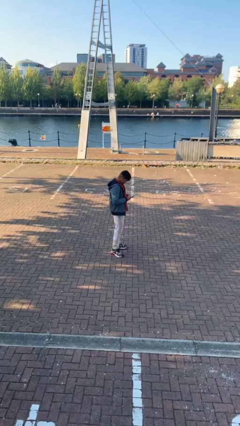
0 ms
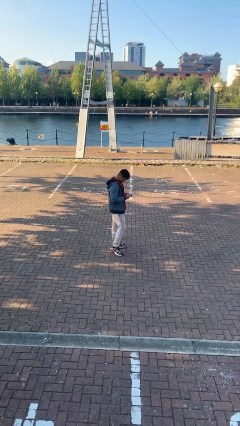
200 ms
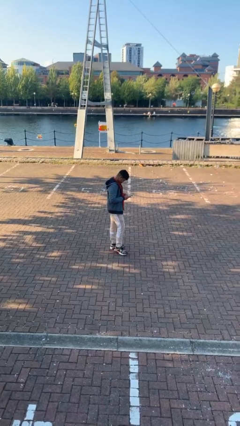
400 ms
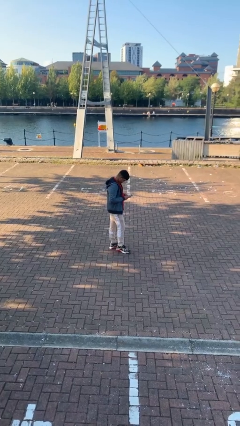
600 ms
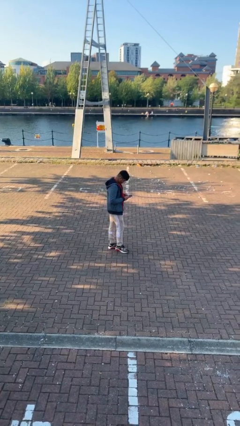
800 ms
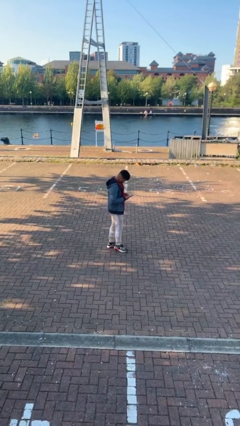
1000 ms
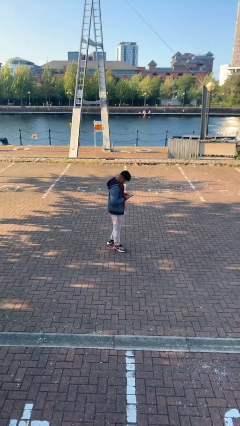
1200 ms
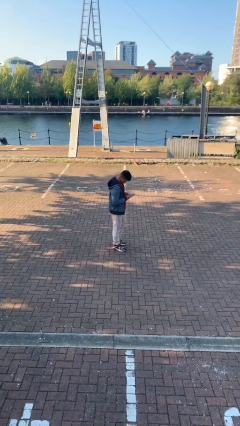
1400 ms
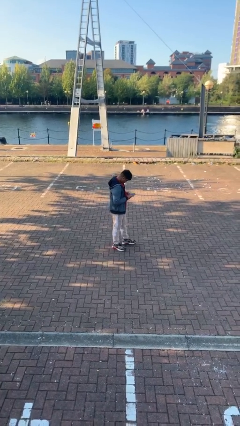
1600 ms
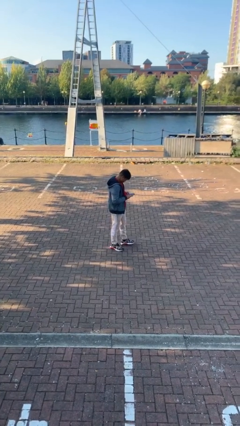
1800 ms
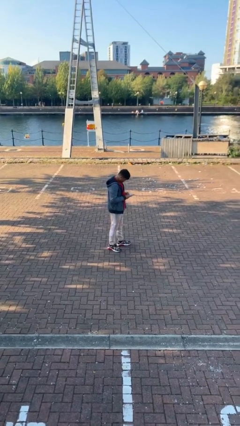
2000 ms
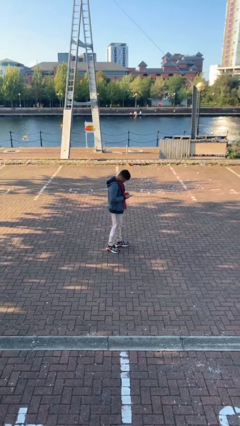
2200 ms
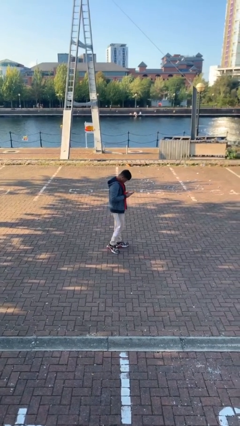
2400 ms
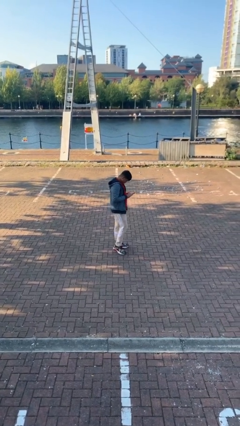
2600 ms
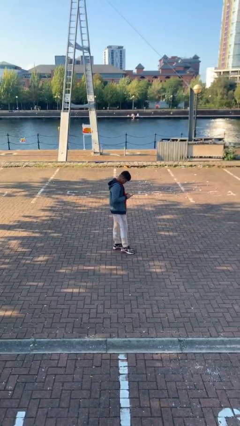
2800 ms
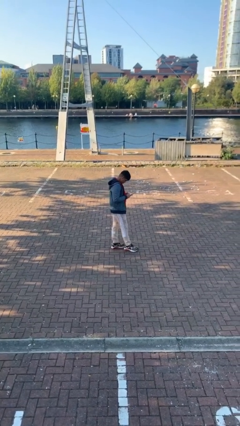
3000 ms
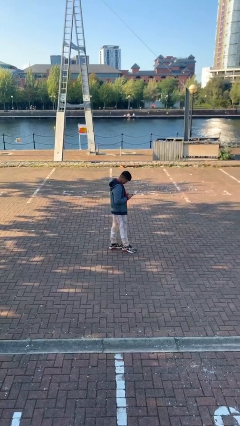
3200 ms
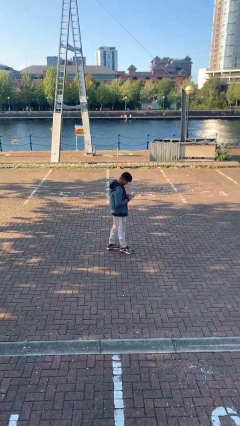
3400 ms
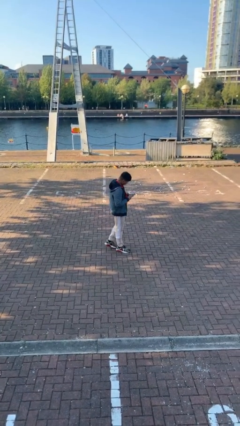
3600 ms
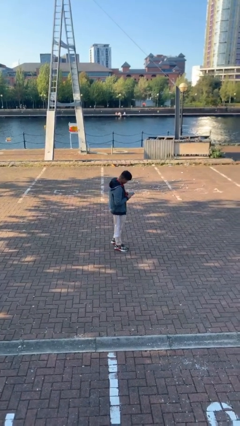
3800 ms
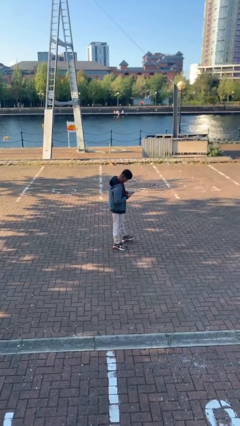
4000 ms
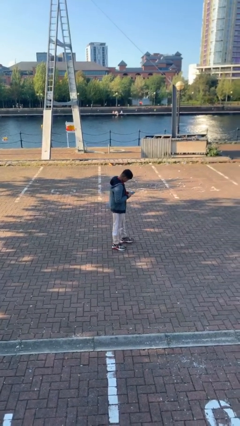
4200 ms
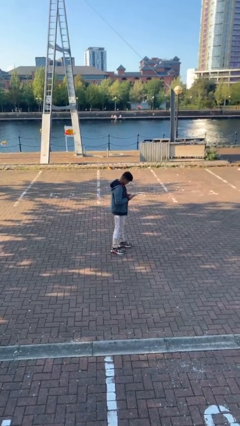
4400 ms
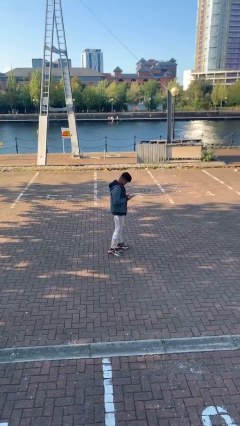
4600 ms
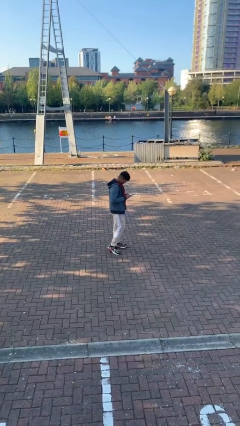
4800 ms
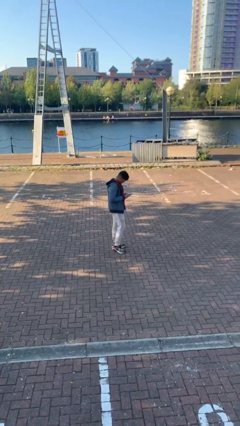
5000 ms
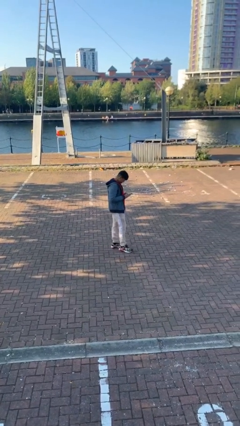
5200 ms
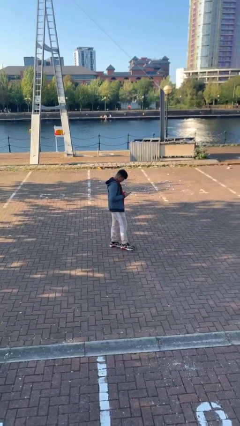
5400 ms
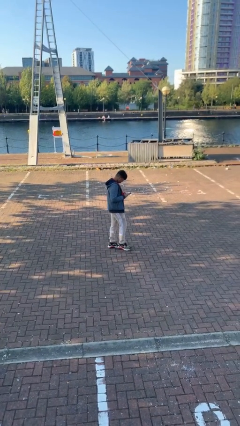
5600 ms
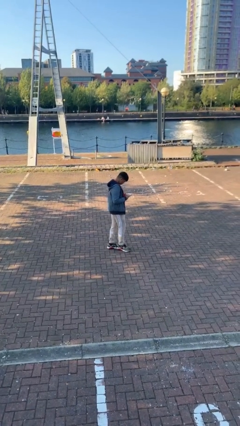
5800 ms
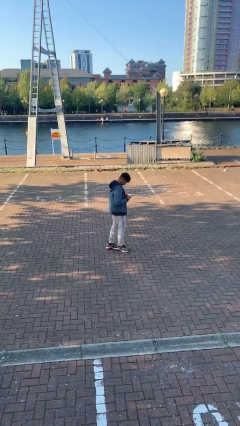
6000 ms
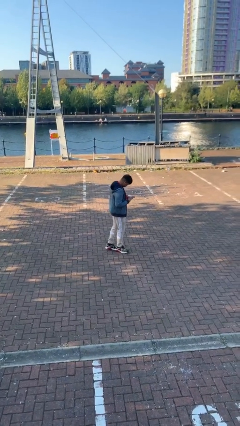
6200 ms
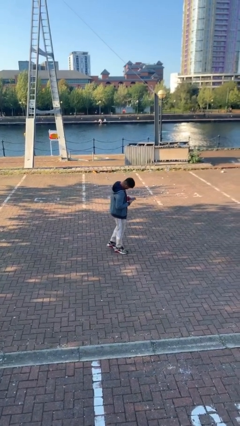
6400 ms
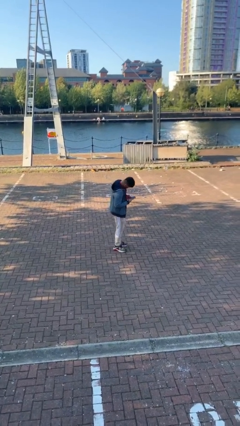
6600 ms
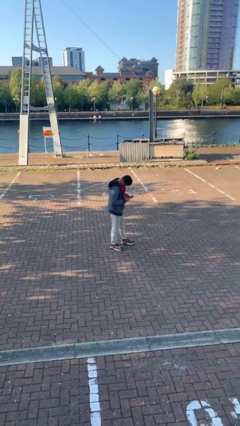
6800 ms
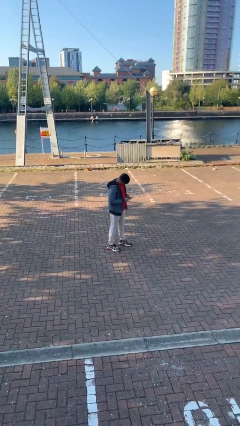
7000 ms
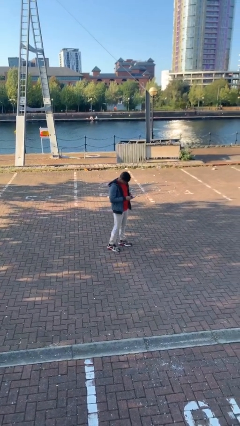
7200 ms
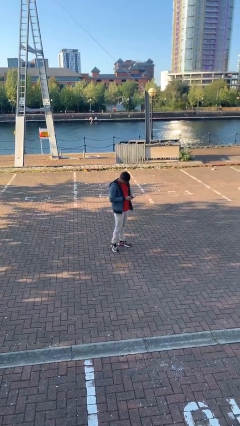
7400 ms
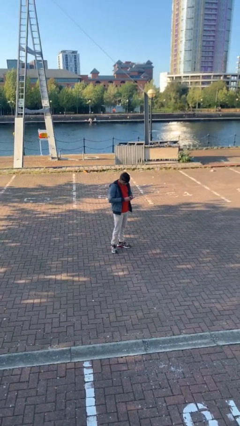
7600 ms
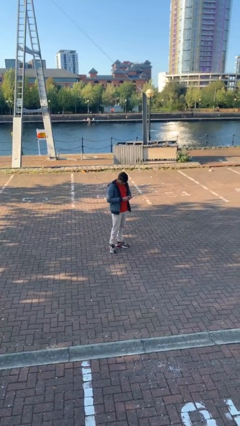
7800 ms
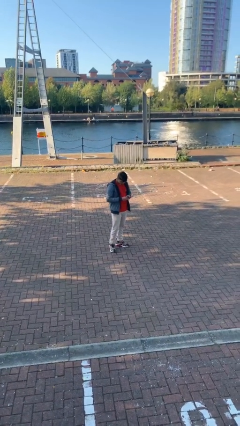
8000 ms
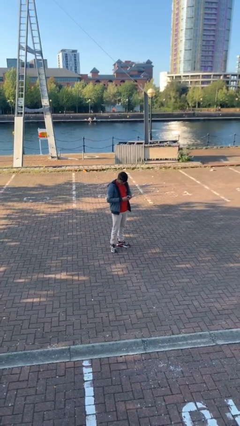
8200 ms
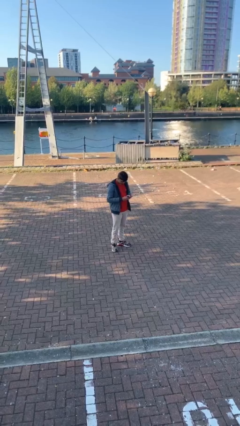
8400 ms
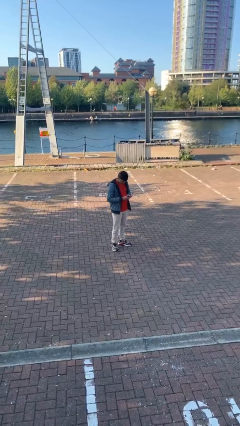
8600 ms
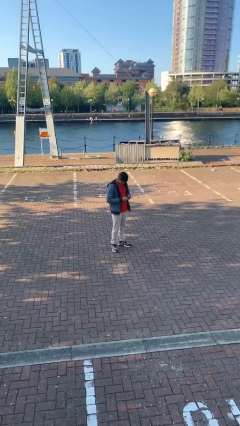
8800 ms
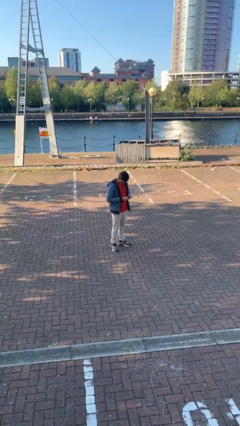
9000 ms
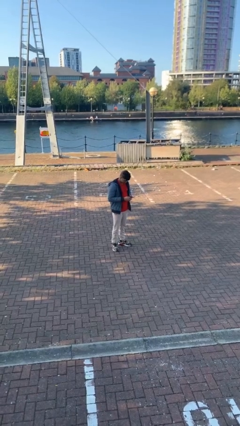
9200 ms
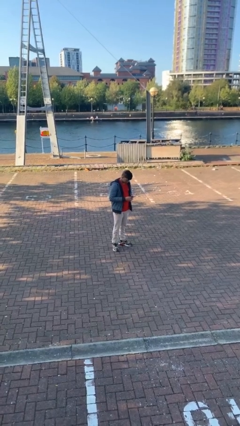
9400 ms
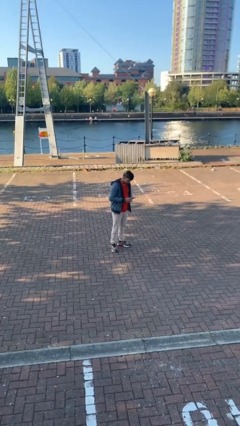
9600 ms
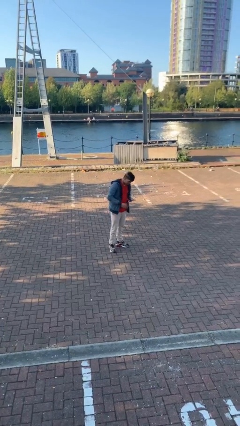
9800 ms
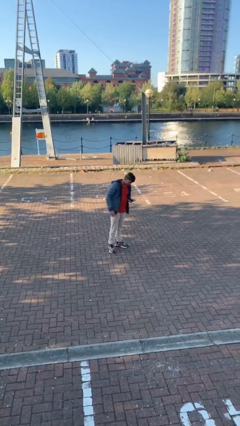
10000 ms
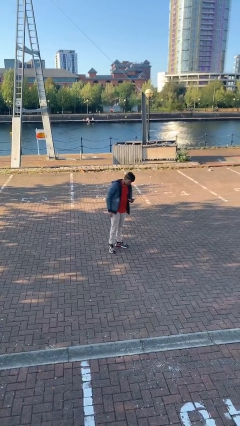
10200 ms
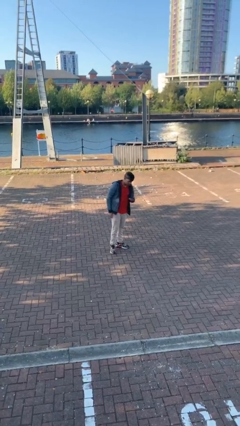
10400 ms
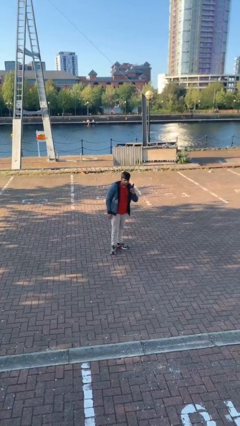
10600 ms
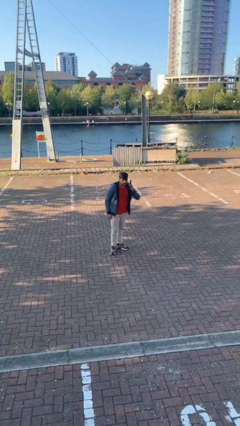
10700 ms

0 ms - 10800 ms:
person texts on phone

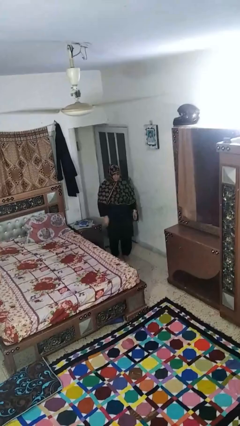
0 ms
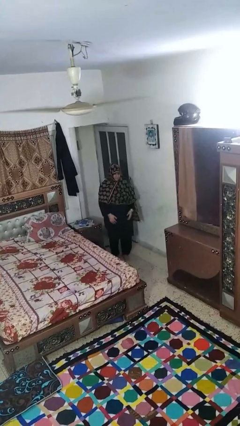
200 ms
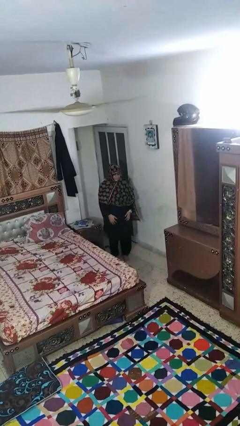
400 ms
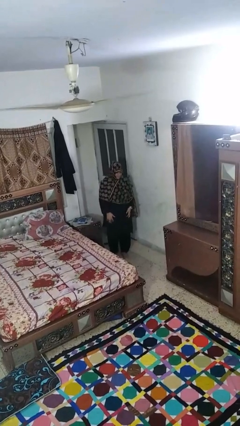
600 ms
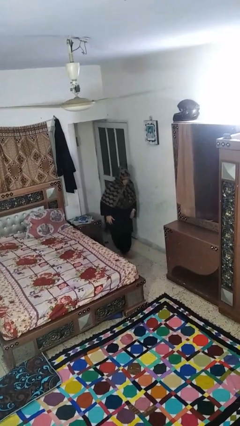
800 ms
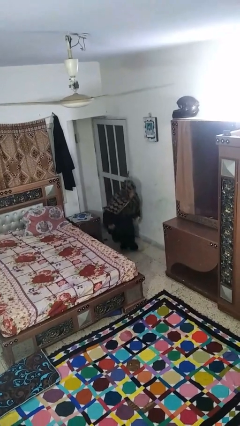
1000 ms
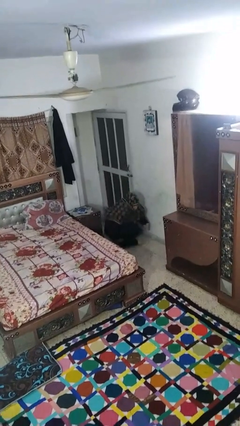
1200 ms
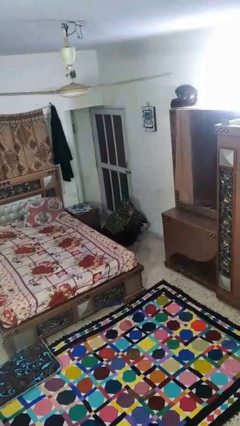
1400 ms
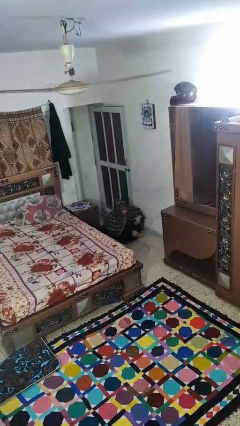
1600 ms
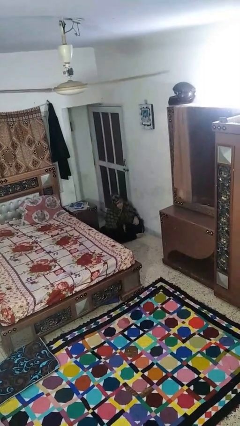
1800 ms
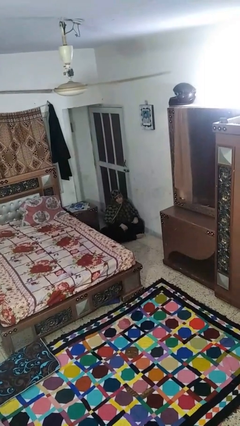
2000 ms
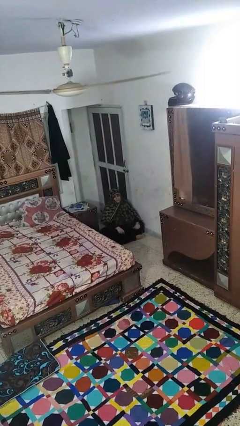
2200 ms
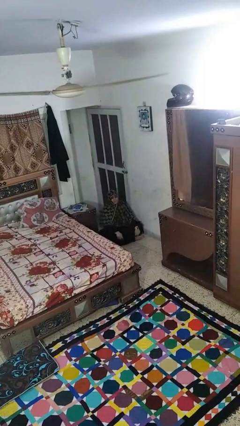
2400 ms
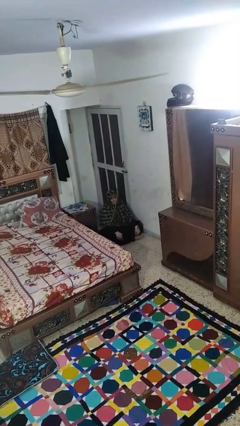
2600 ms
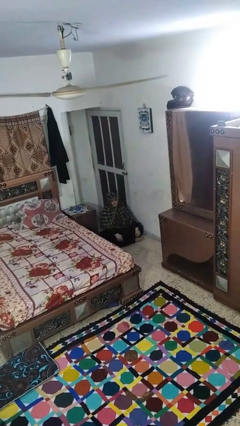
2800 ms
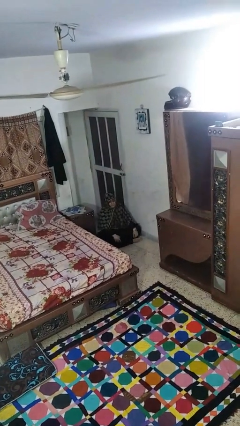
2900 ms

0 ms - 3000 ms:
person sits crisscross

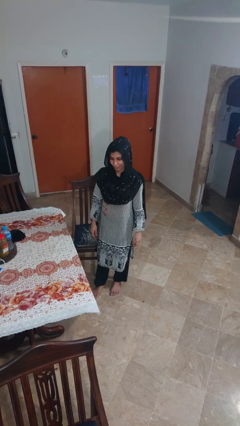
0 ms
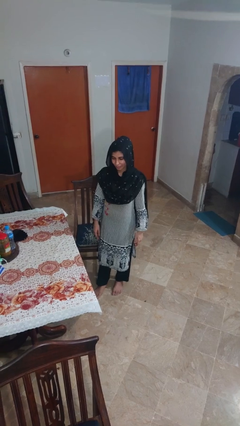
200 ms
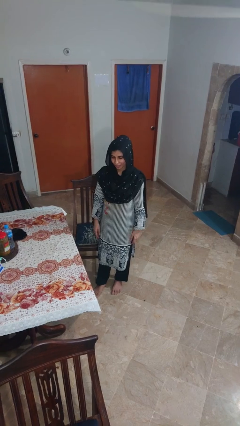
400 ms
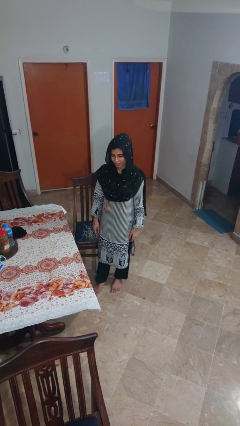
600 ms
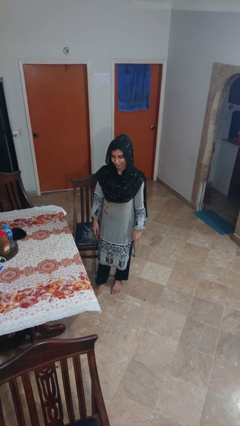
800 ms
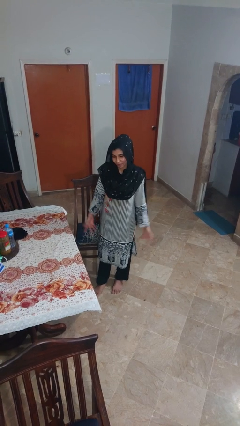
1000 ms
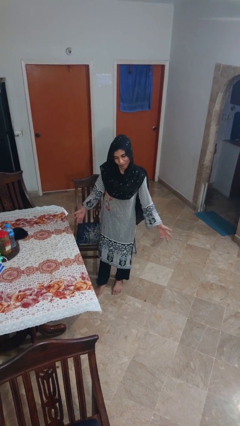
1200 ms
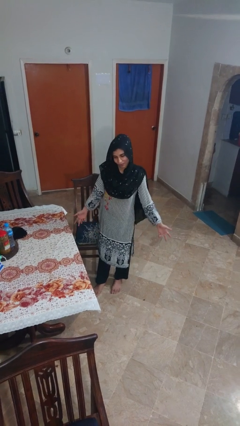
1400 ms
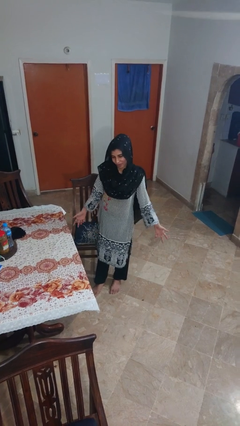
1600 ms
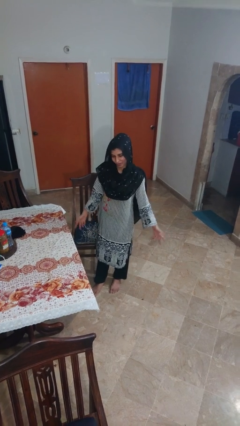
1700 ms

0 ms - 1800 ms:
person shrugs

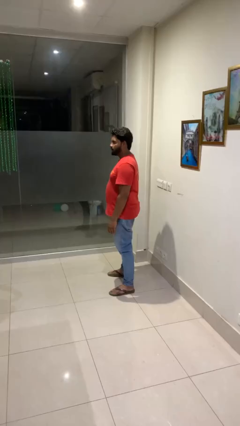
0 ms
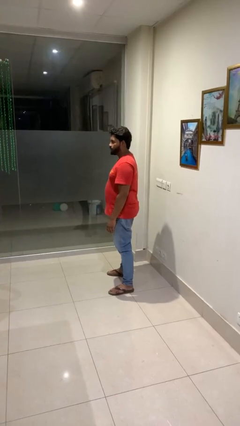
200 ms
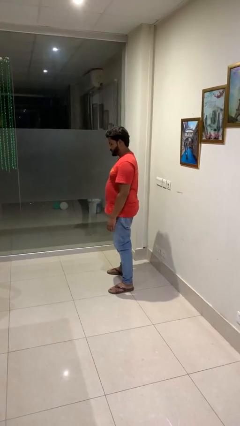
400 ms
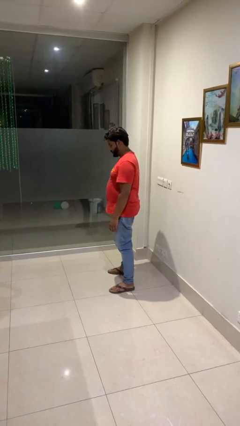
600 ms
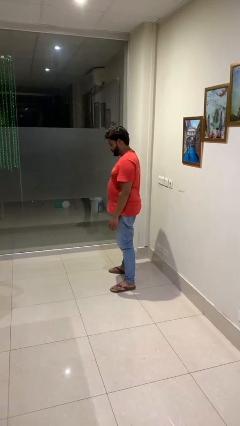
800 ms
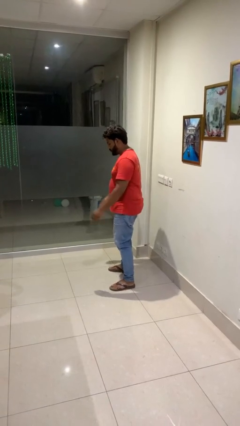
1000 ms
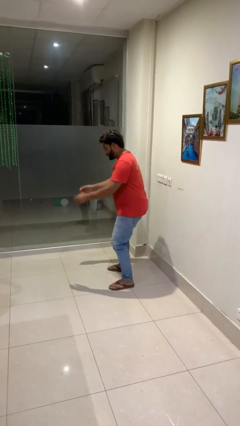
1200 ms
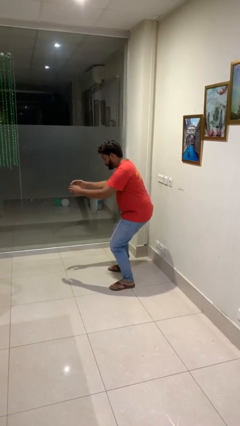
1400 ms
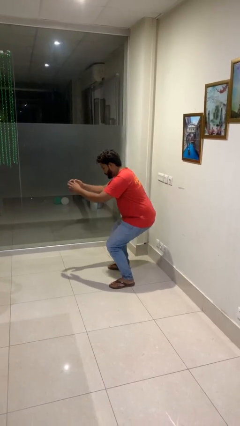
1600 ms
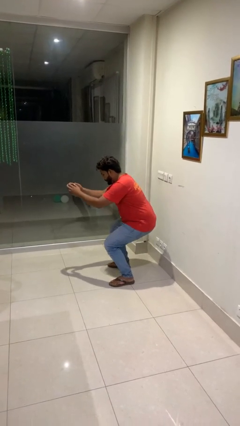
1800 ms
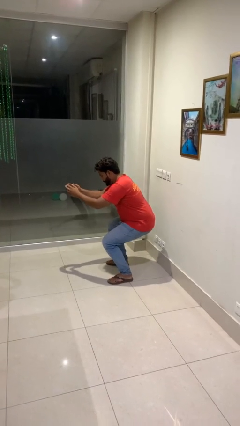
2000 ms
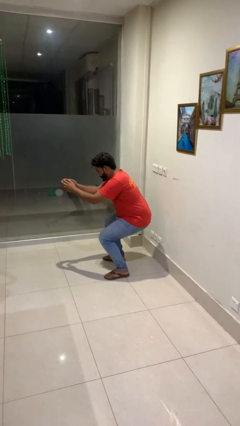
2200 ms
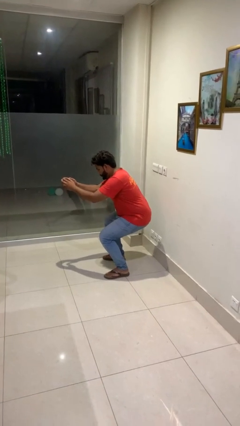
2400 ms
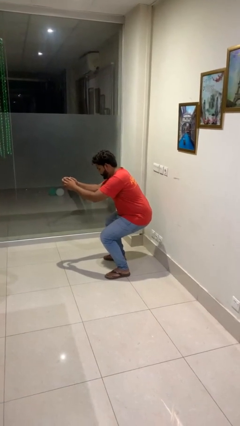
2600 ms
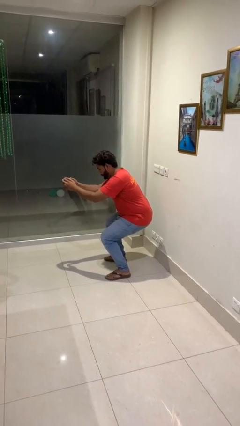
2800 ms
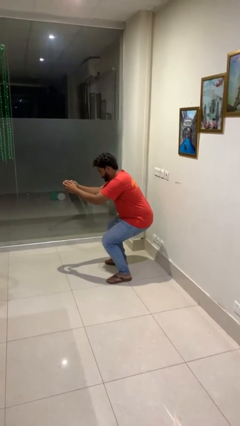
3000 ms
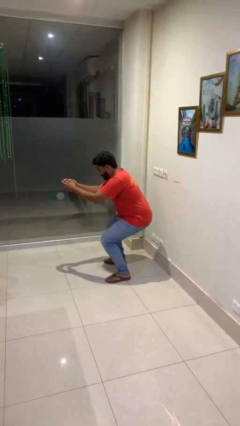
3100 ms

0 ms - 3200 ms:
person squats
